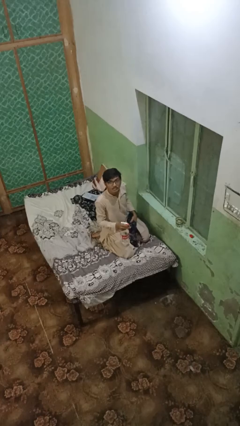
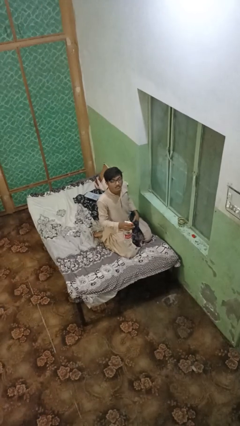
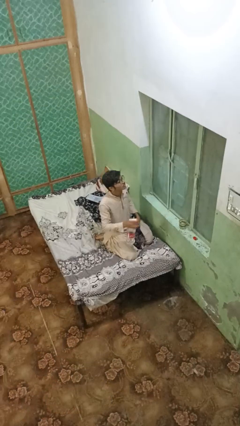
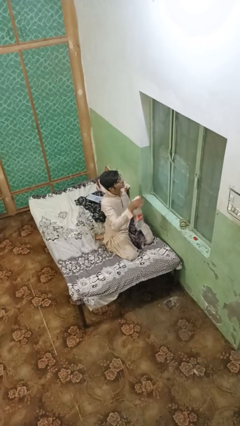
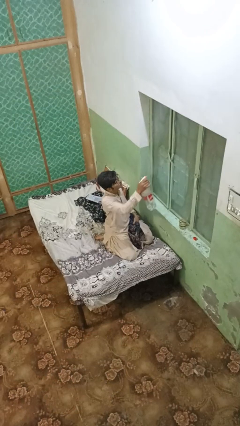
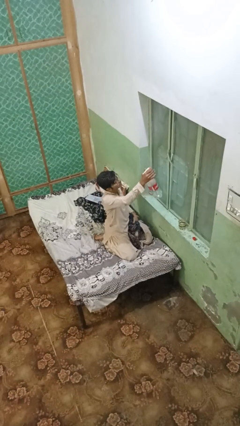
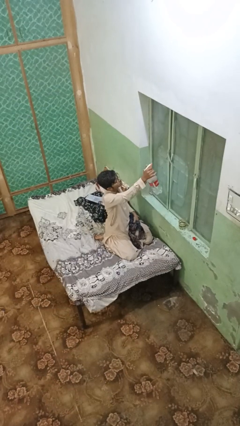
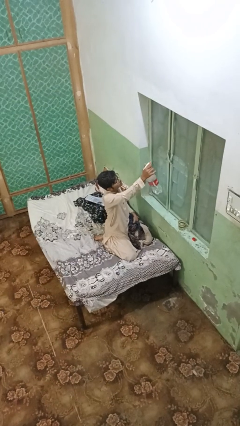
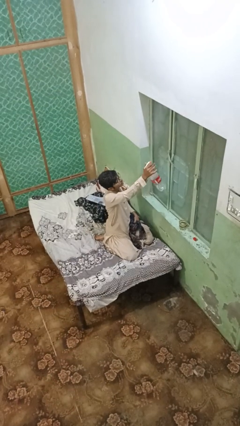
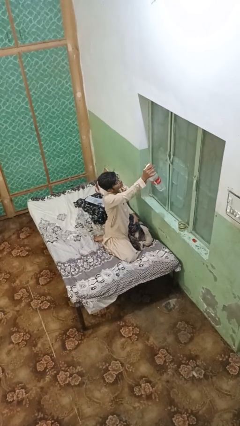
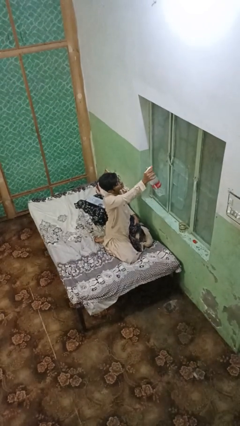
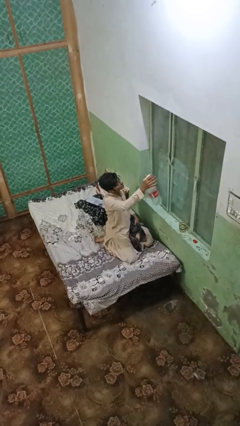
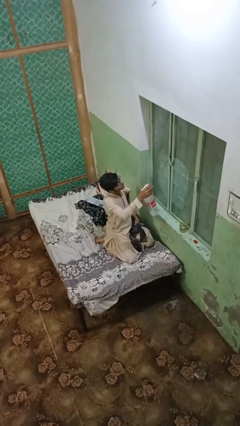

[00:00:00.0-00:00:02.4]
person sprays from bottle

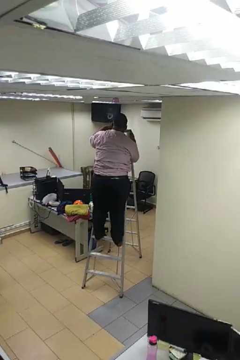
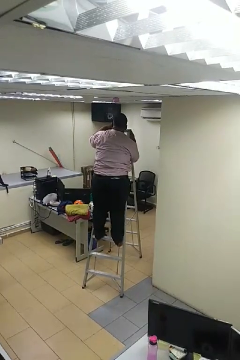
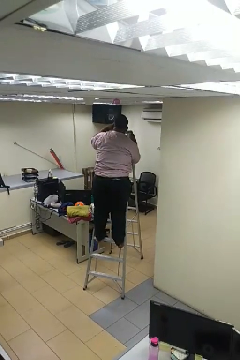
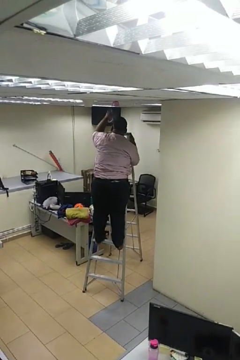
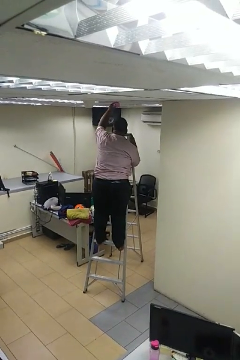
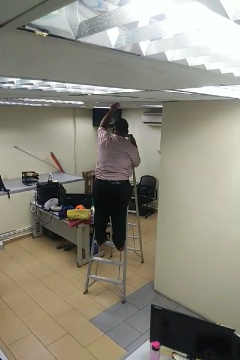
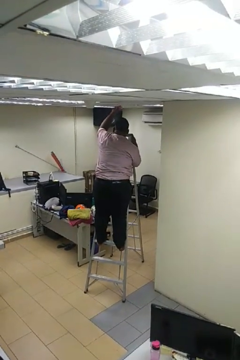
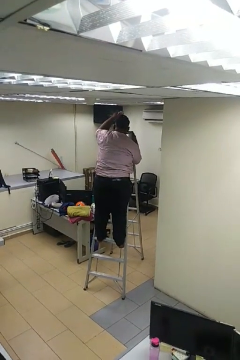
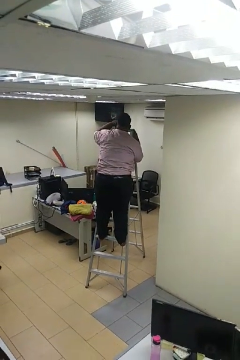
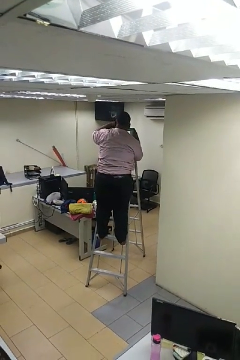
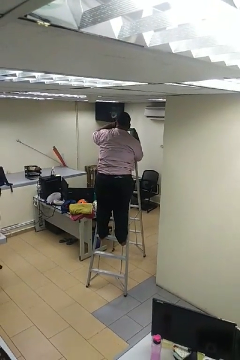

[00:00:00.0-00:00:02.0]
person takes down smoke detector

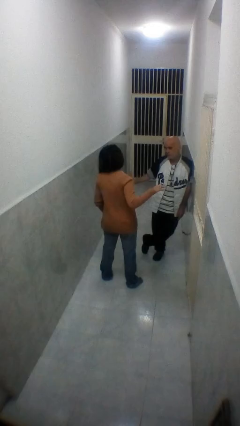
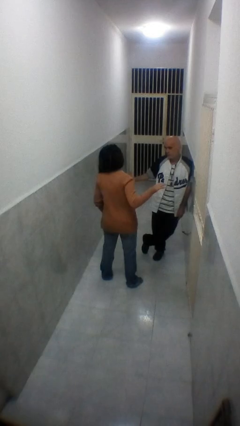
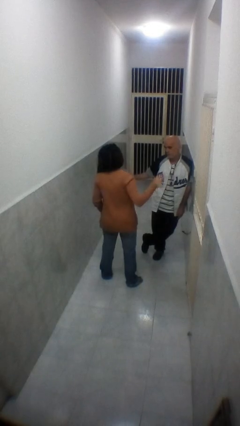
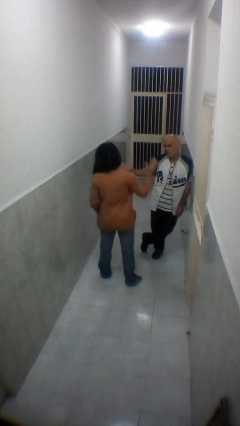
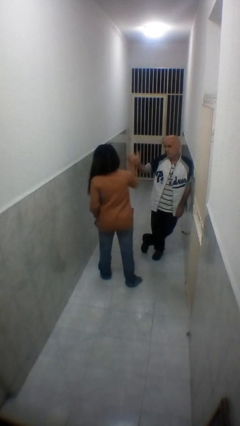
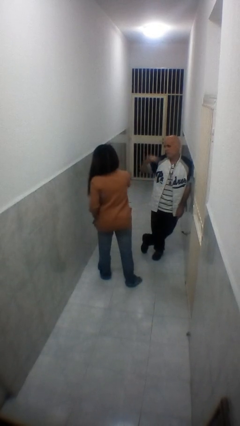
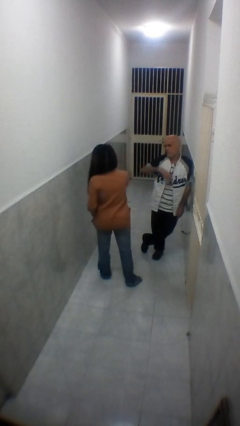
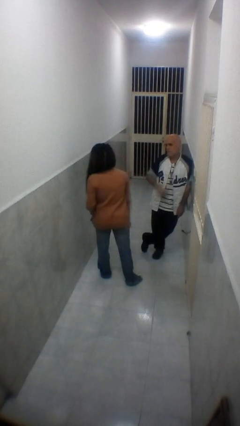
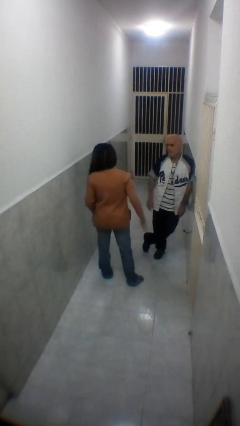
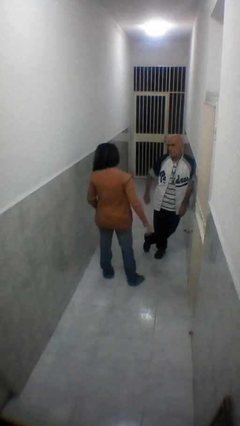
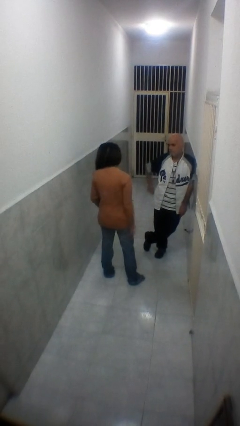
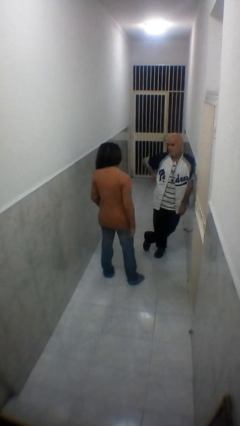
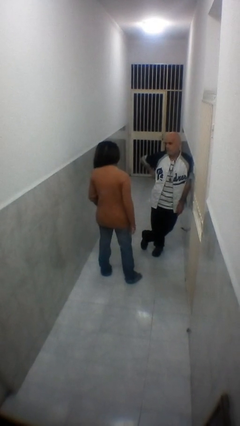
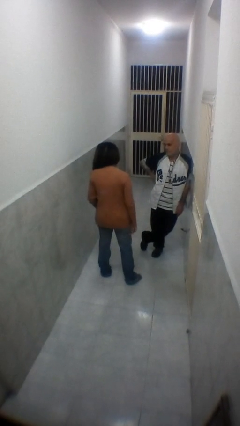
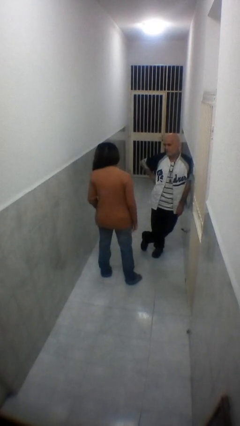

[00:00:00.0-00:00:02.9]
person highfives hand

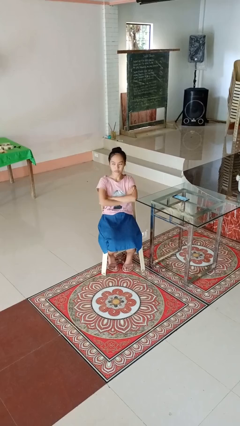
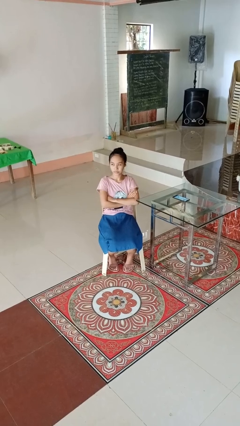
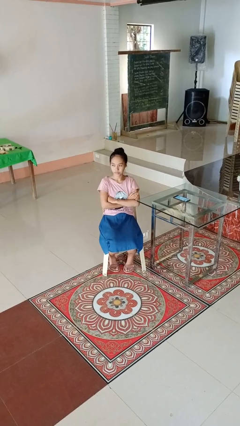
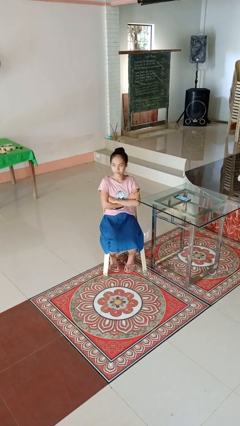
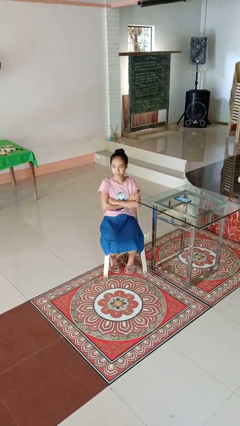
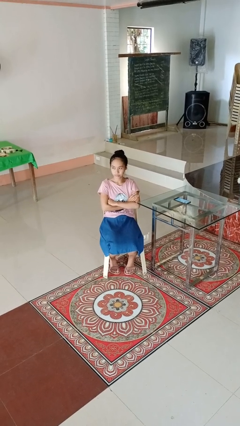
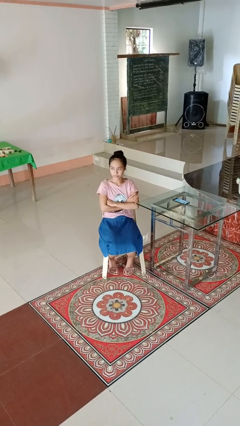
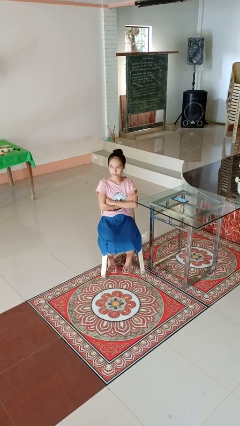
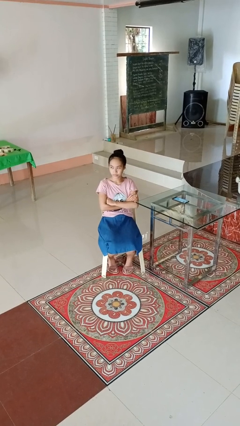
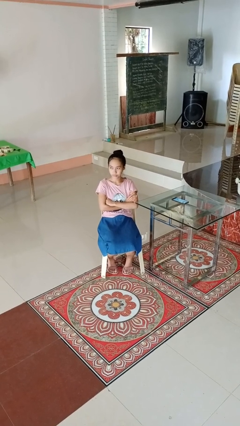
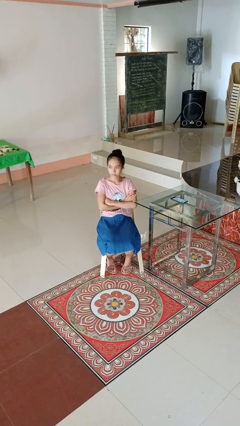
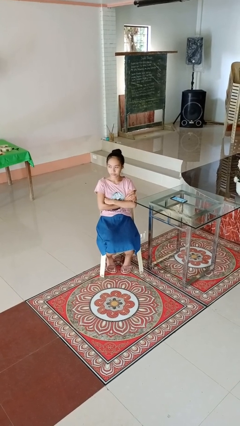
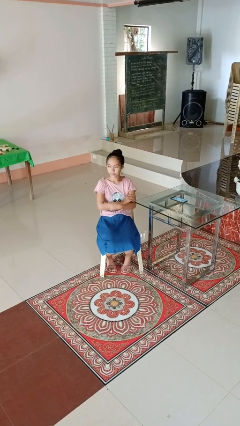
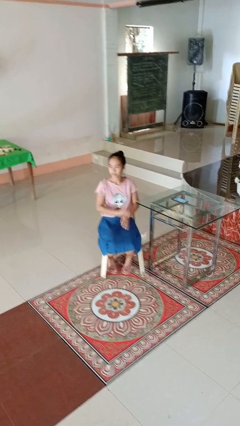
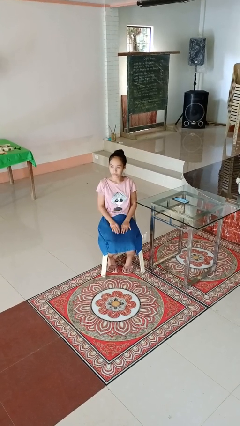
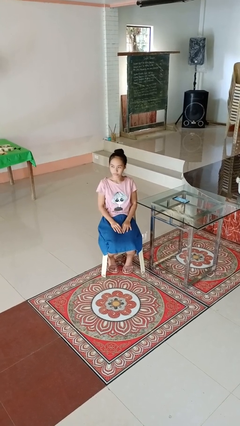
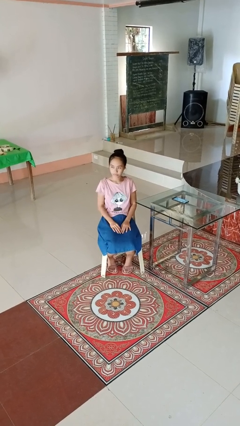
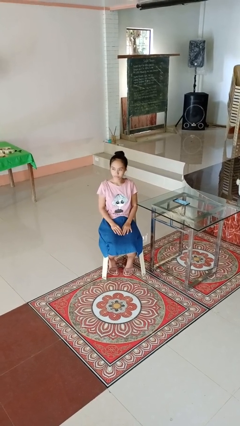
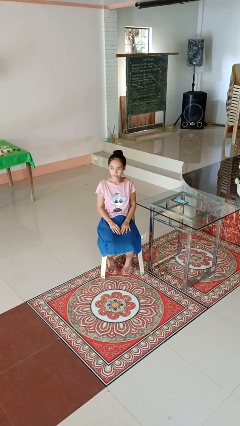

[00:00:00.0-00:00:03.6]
person crosses arms

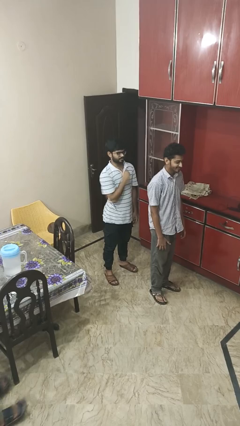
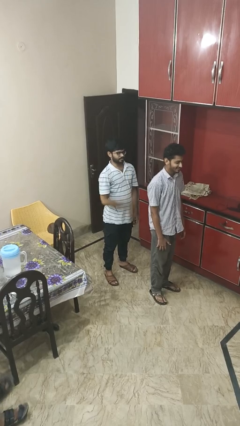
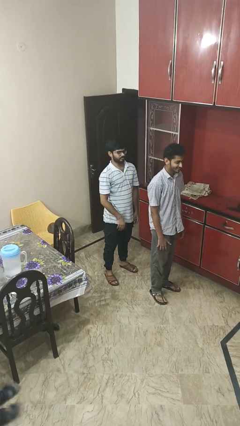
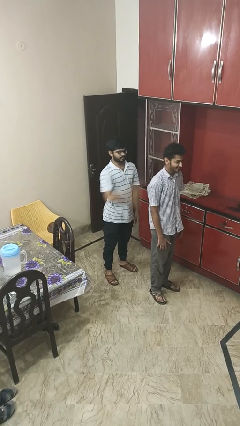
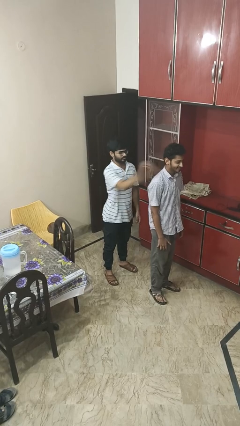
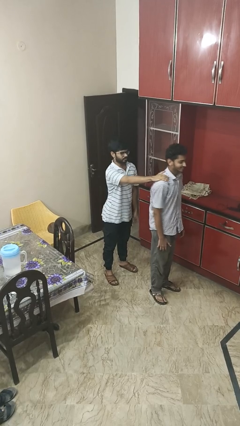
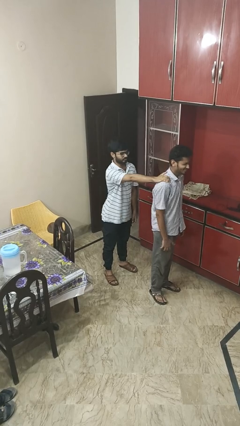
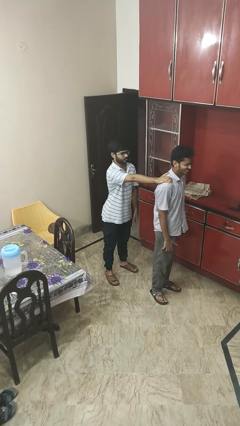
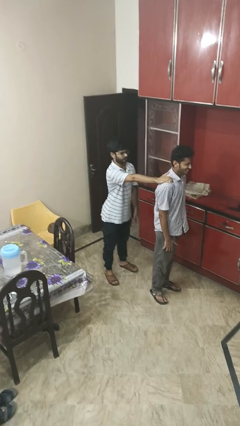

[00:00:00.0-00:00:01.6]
person grabs person by shoulder

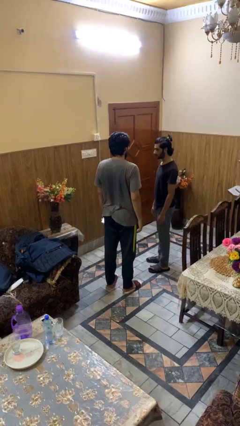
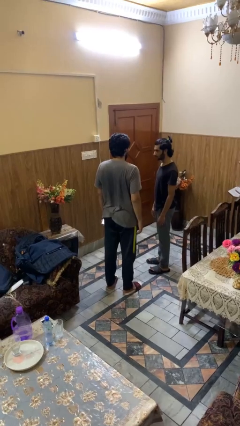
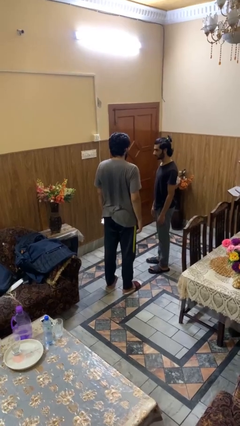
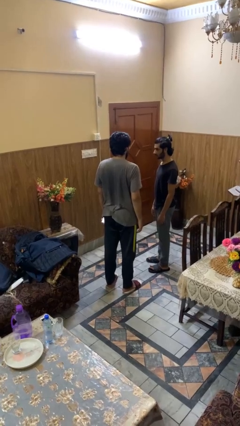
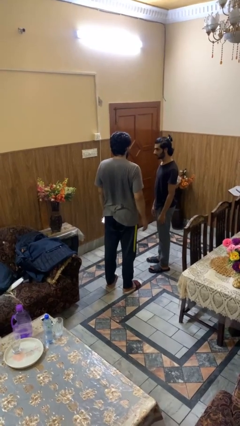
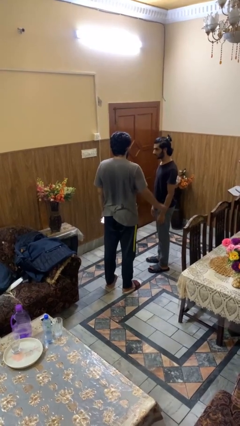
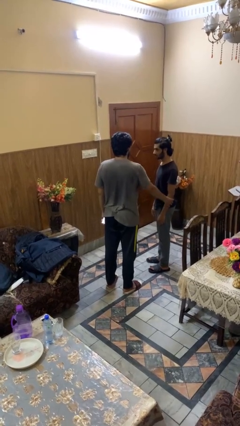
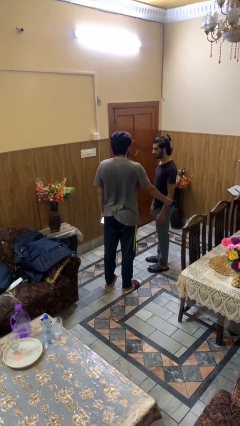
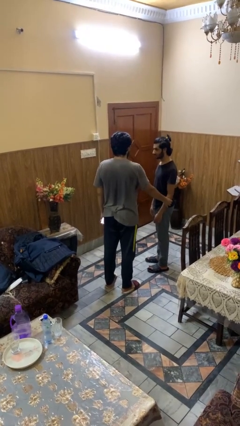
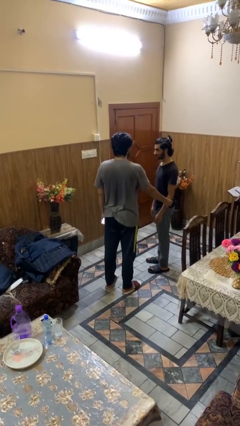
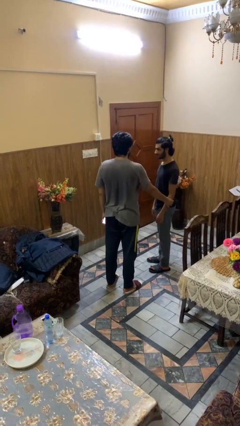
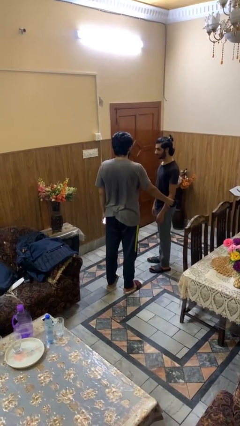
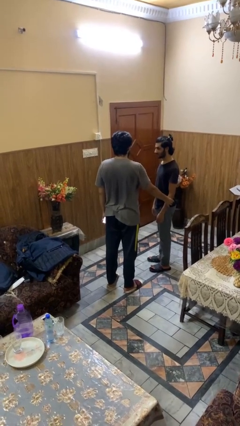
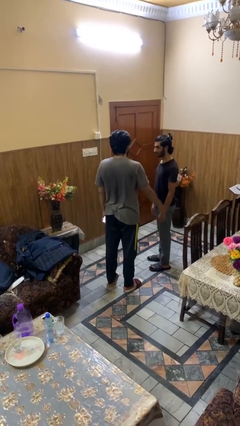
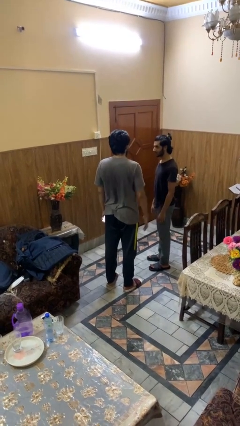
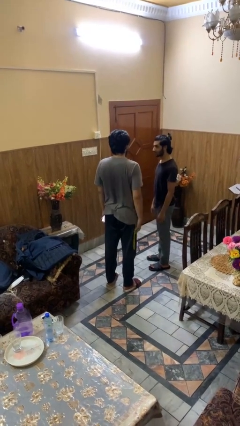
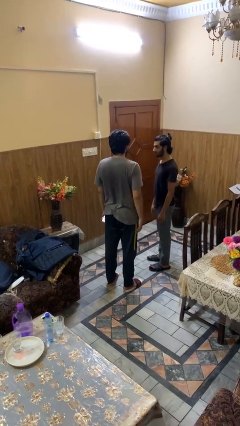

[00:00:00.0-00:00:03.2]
person grabs person by forearm

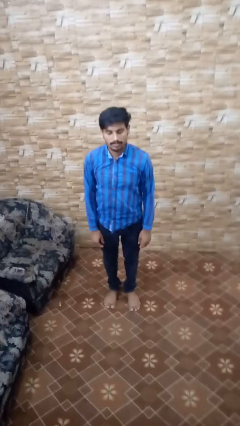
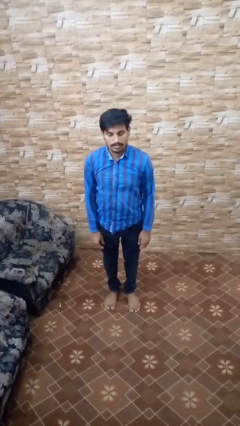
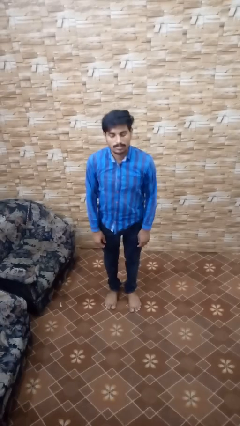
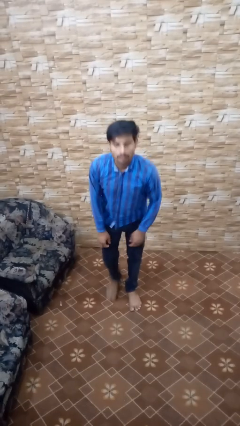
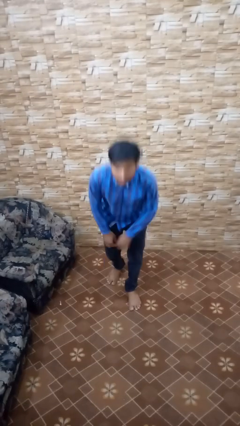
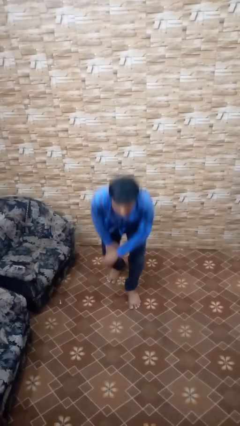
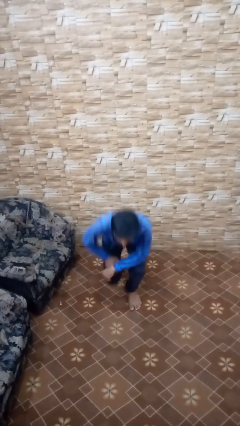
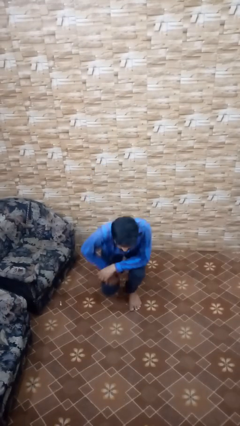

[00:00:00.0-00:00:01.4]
person kneels

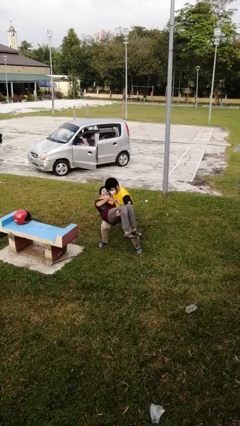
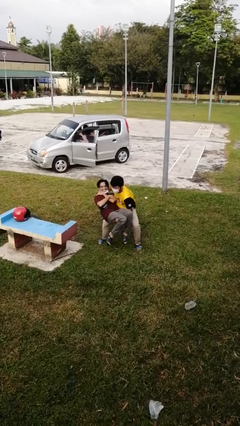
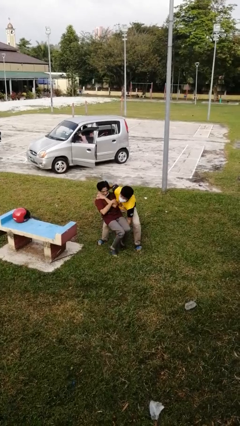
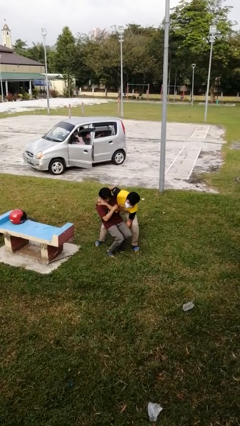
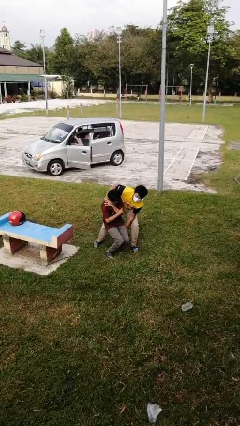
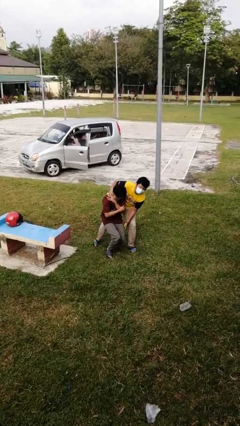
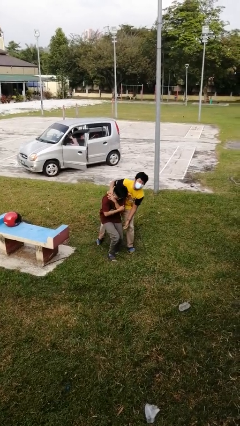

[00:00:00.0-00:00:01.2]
person puts down person
